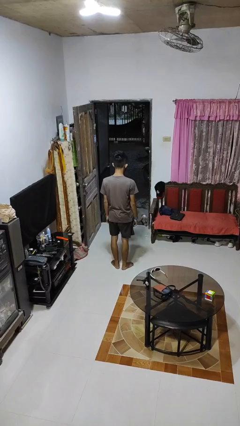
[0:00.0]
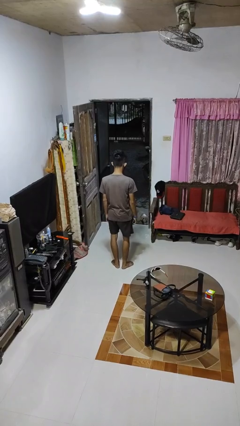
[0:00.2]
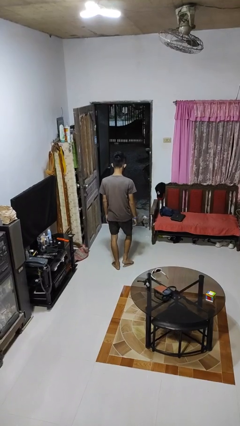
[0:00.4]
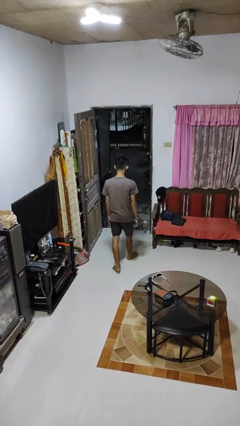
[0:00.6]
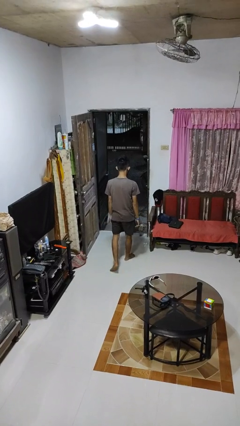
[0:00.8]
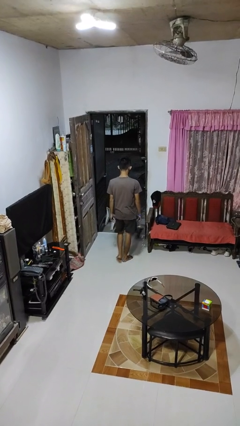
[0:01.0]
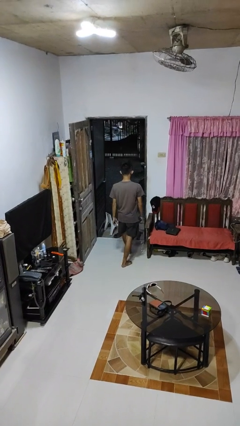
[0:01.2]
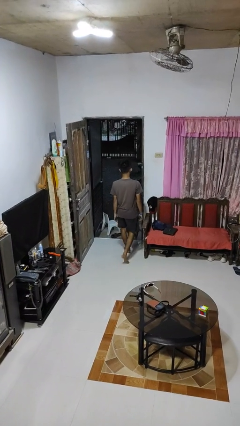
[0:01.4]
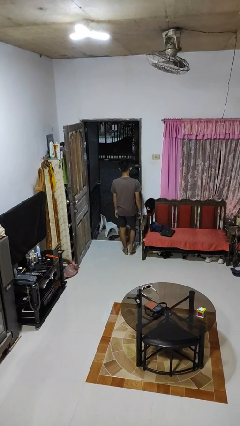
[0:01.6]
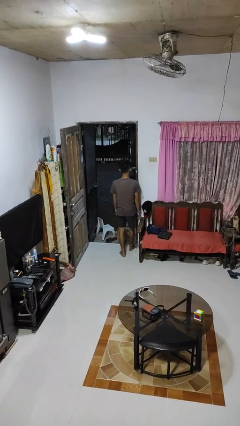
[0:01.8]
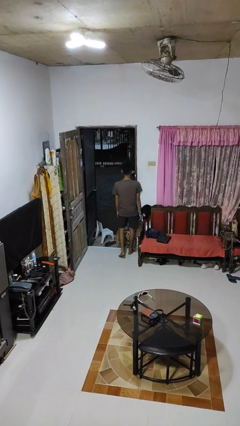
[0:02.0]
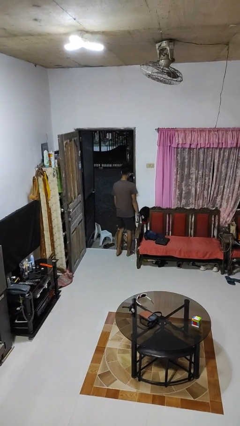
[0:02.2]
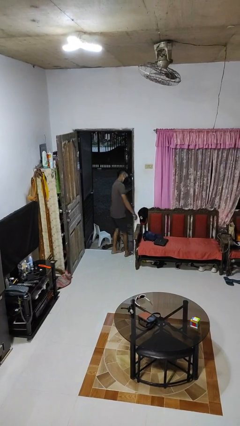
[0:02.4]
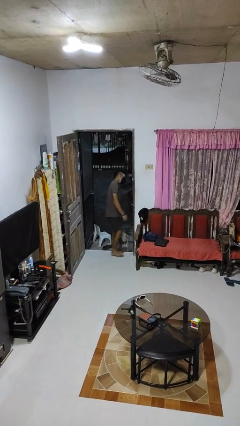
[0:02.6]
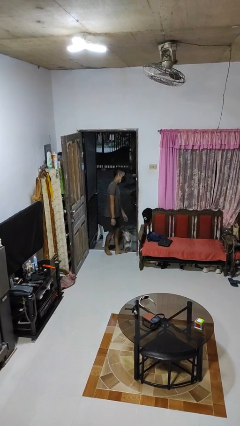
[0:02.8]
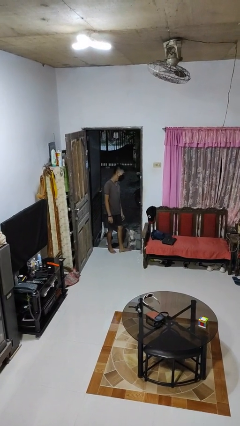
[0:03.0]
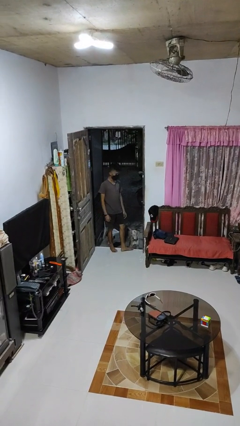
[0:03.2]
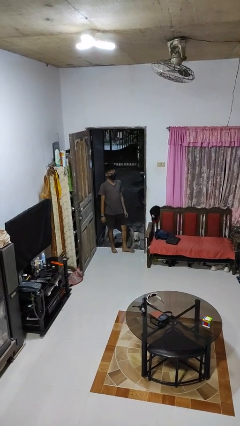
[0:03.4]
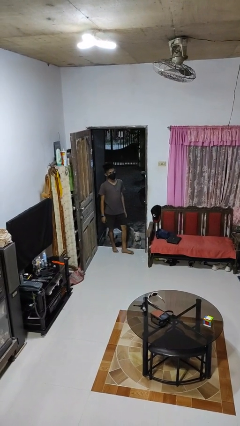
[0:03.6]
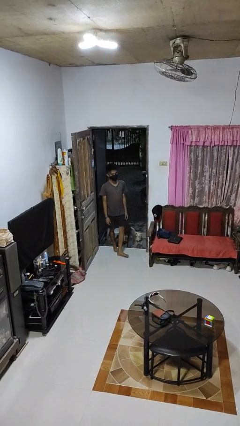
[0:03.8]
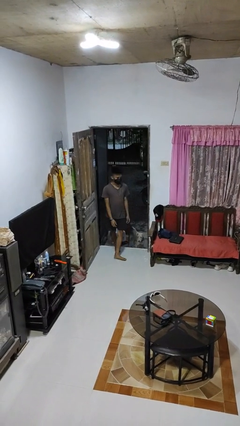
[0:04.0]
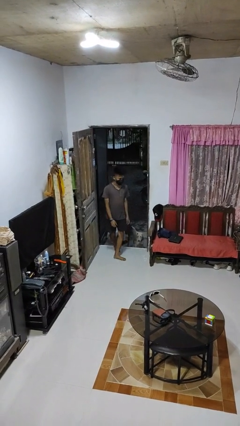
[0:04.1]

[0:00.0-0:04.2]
person bumps into wall

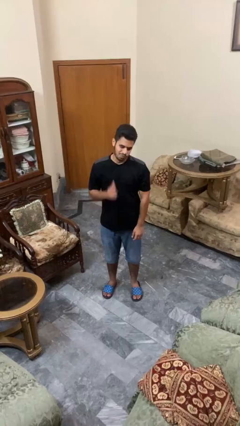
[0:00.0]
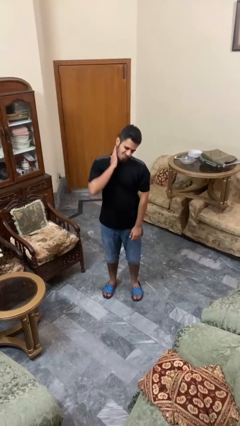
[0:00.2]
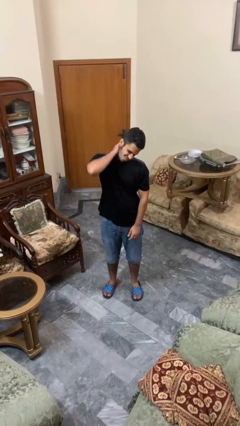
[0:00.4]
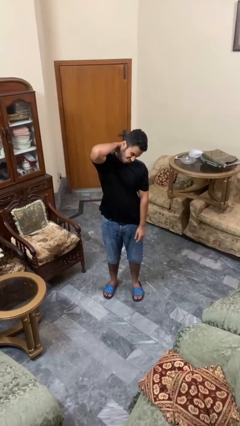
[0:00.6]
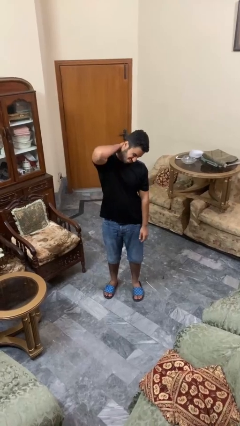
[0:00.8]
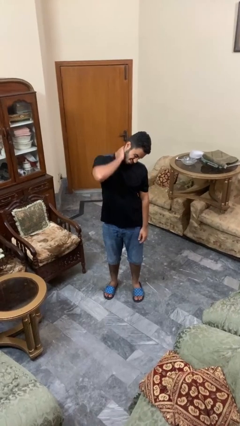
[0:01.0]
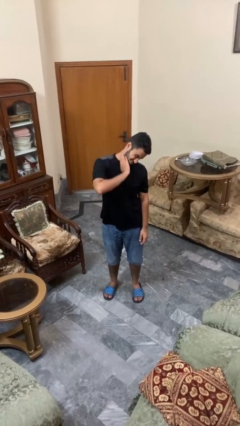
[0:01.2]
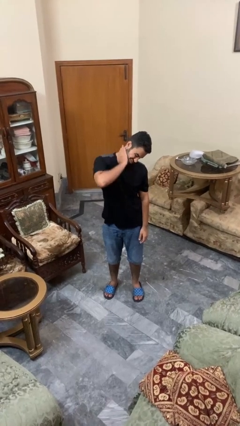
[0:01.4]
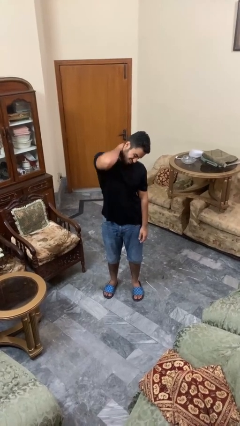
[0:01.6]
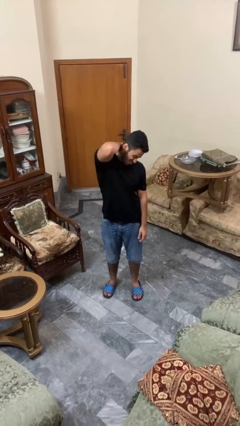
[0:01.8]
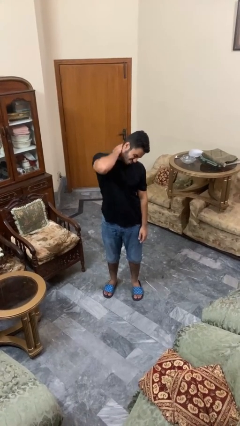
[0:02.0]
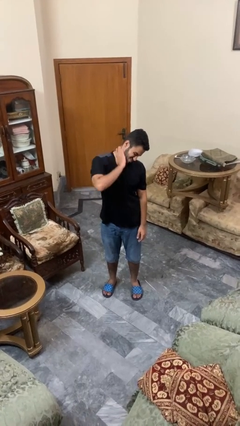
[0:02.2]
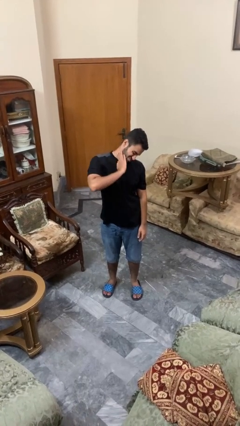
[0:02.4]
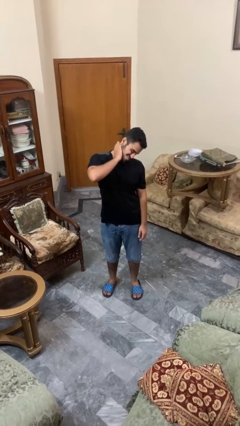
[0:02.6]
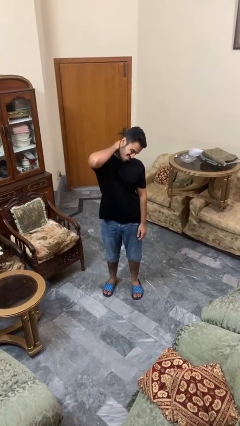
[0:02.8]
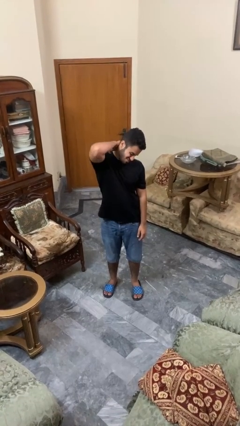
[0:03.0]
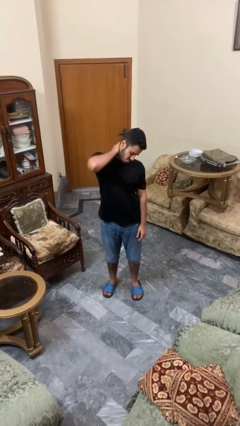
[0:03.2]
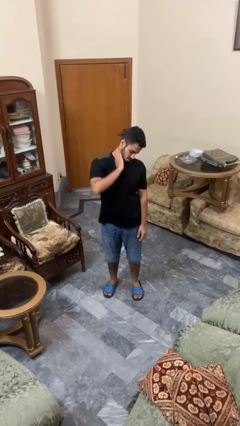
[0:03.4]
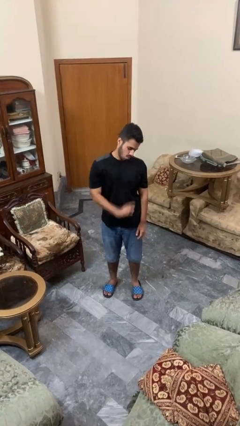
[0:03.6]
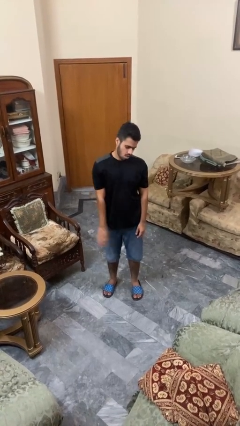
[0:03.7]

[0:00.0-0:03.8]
person rubs neck

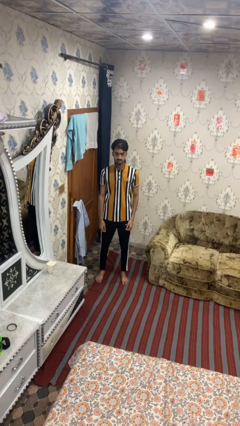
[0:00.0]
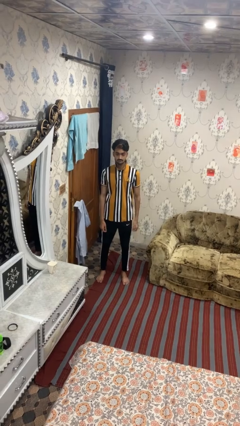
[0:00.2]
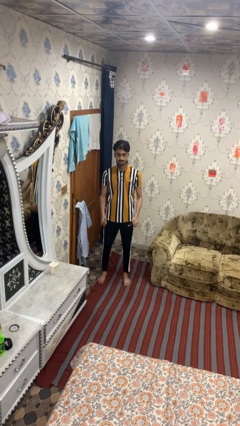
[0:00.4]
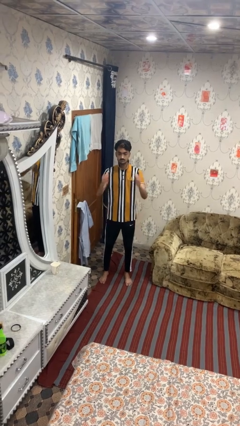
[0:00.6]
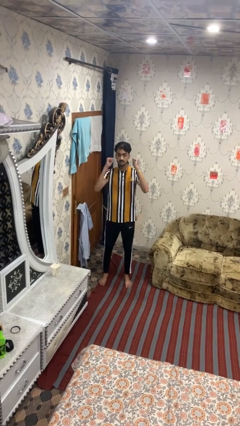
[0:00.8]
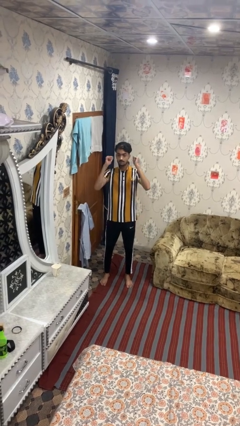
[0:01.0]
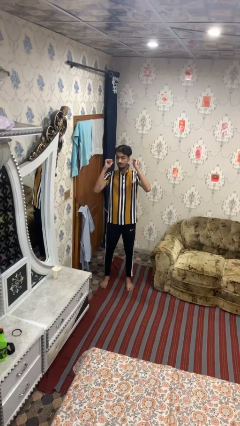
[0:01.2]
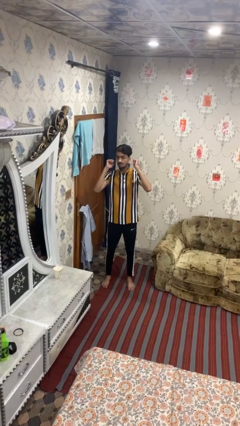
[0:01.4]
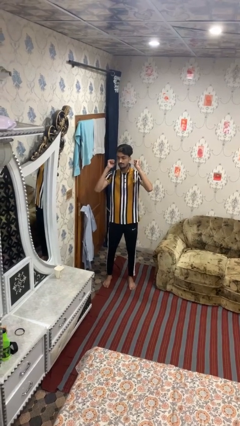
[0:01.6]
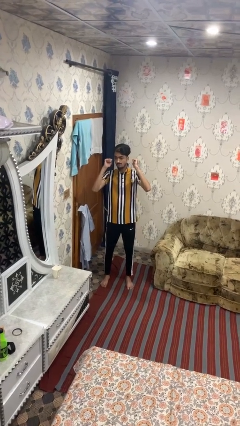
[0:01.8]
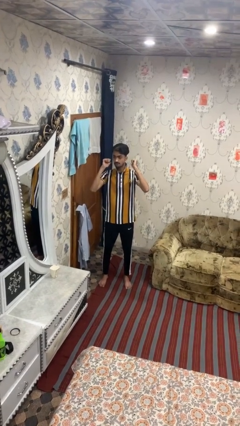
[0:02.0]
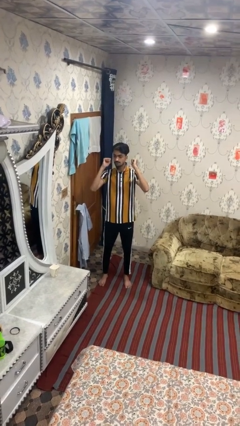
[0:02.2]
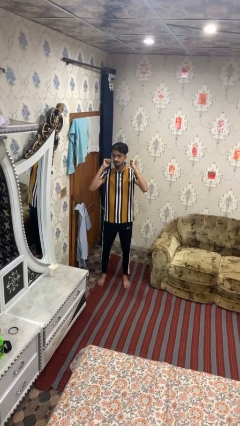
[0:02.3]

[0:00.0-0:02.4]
person gestures behind me

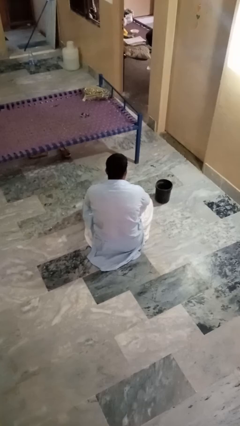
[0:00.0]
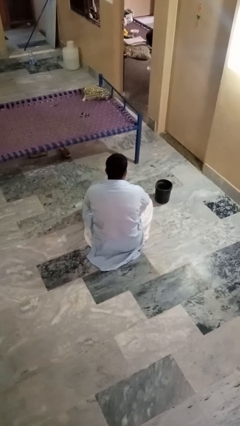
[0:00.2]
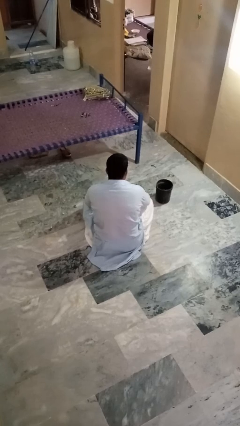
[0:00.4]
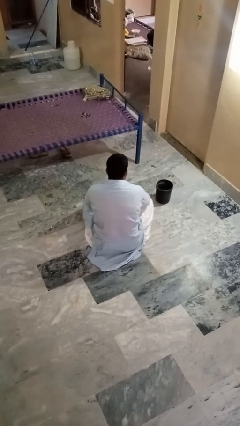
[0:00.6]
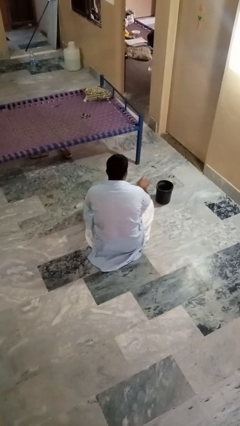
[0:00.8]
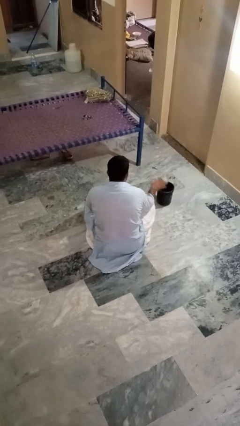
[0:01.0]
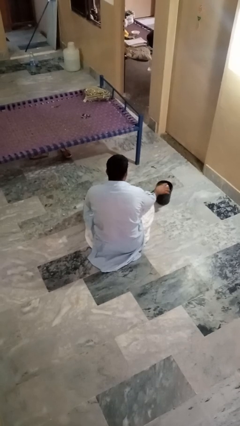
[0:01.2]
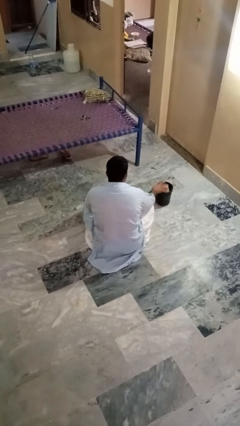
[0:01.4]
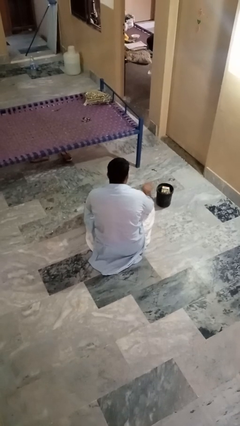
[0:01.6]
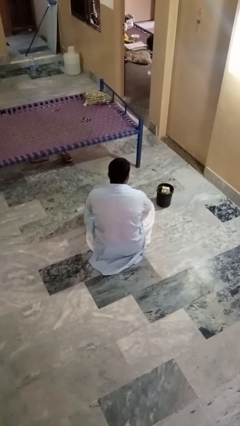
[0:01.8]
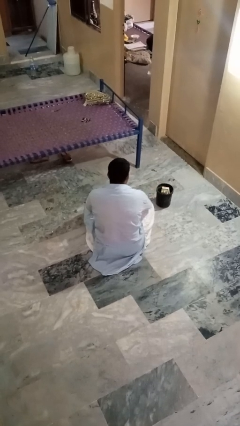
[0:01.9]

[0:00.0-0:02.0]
person puts object into basket

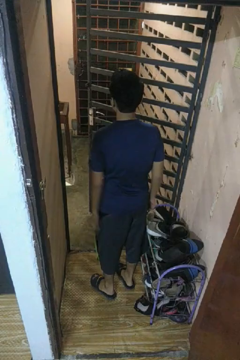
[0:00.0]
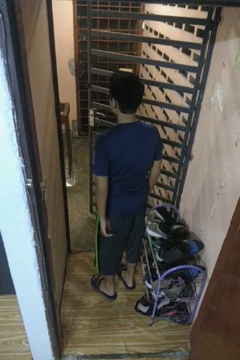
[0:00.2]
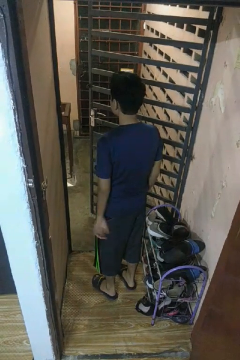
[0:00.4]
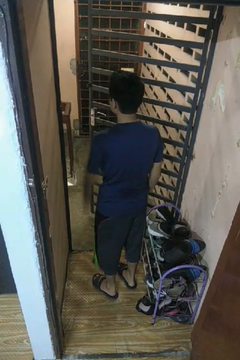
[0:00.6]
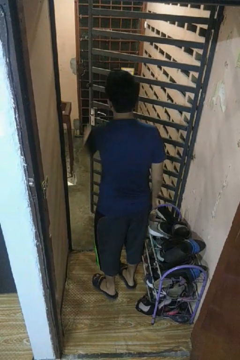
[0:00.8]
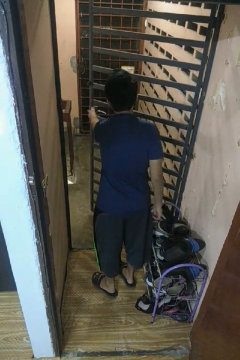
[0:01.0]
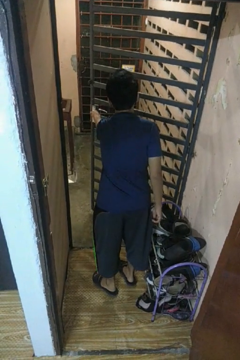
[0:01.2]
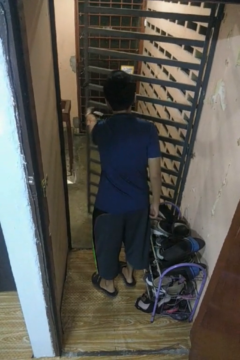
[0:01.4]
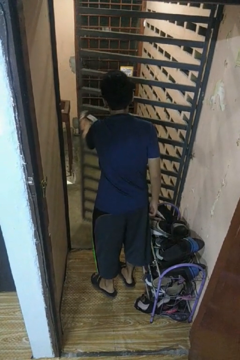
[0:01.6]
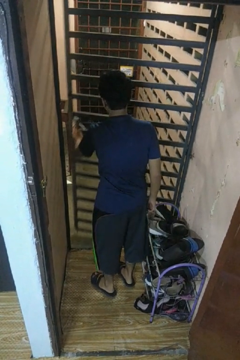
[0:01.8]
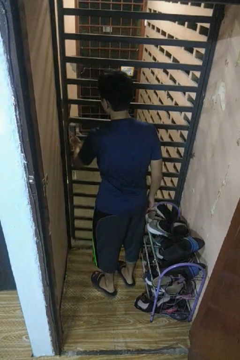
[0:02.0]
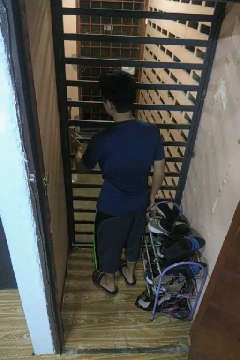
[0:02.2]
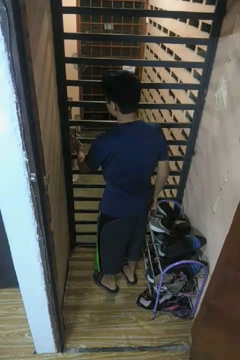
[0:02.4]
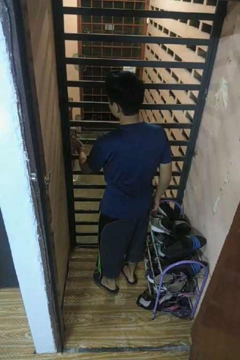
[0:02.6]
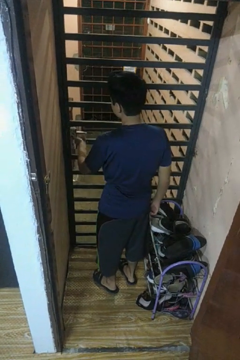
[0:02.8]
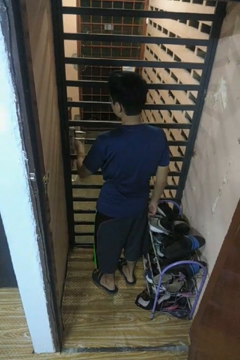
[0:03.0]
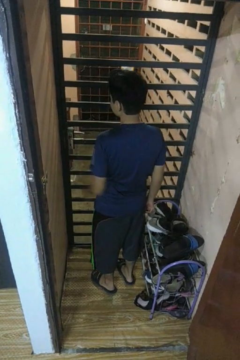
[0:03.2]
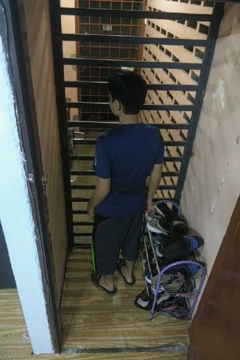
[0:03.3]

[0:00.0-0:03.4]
person closes gate

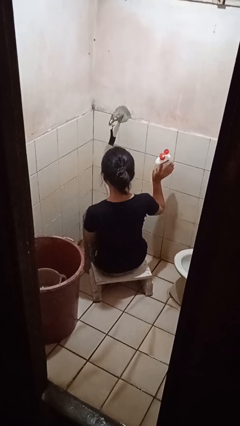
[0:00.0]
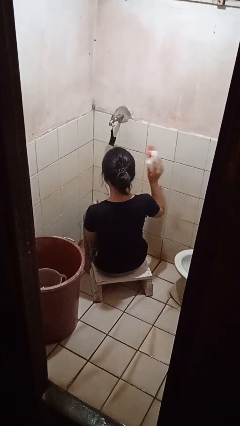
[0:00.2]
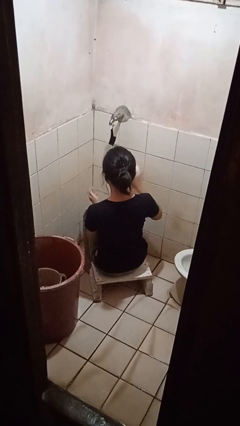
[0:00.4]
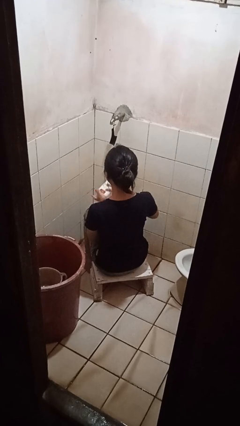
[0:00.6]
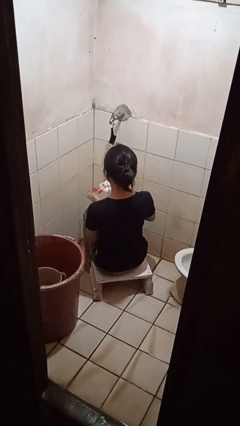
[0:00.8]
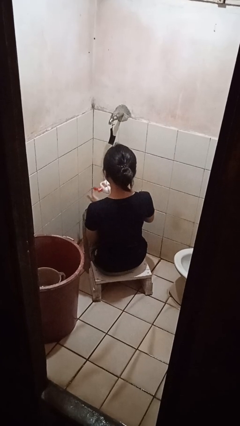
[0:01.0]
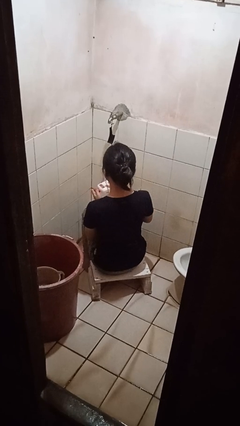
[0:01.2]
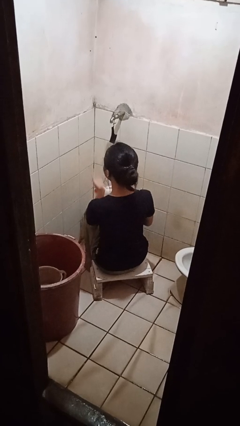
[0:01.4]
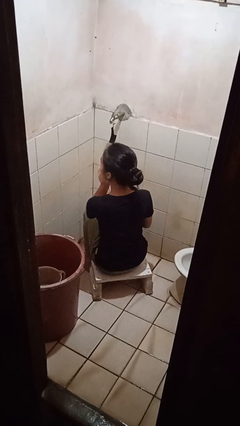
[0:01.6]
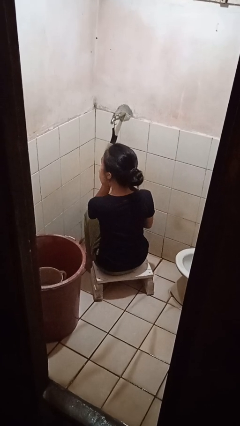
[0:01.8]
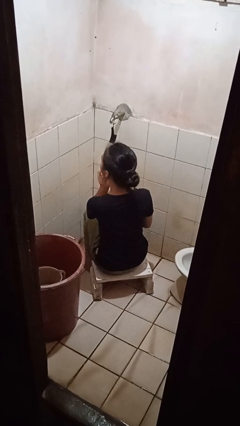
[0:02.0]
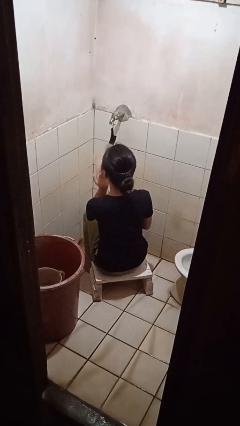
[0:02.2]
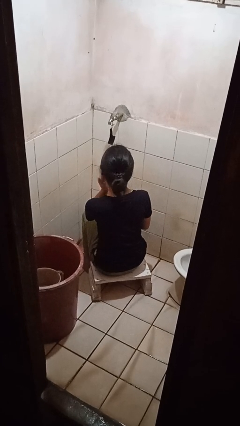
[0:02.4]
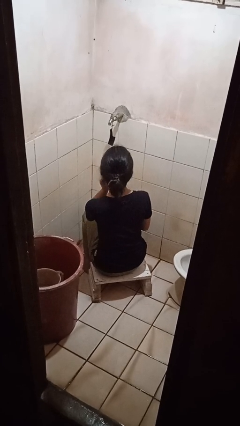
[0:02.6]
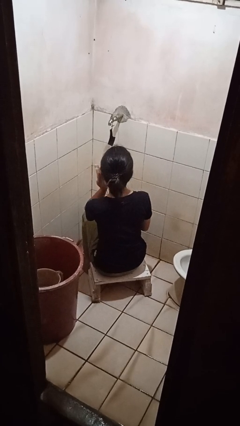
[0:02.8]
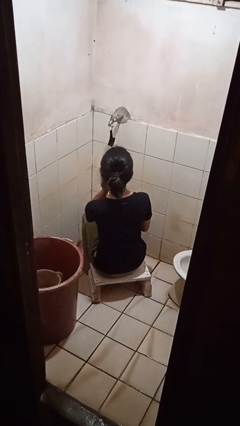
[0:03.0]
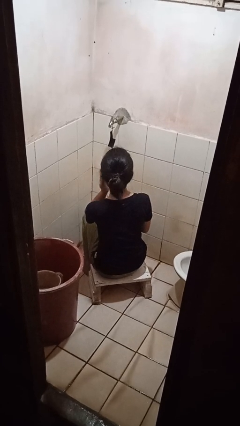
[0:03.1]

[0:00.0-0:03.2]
person applies facial moisturizer
